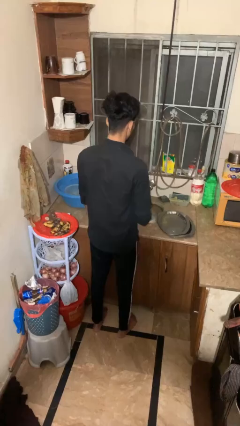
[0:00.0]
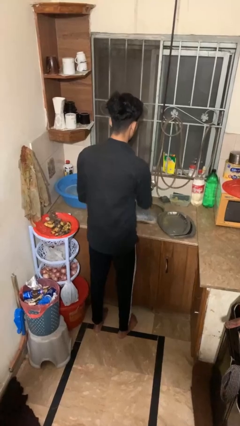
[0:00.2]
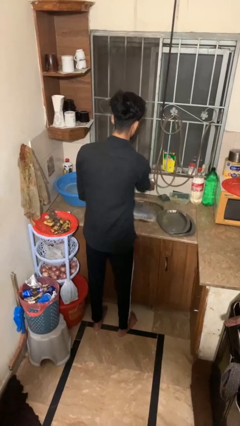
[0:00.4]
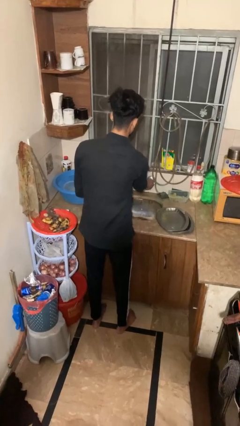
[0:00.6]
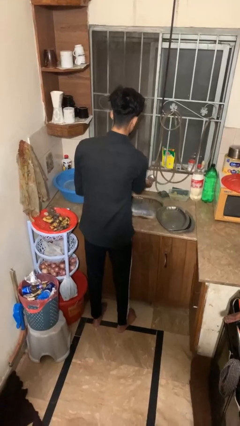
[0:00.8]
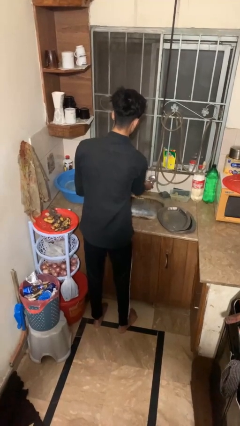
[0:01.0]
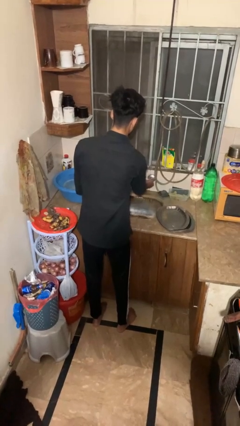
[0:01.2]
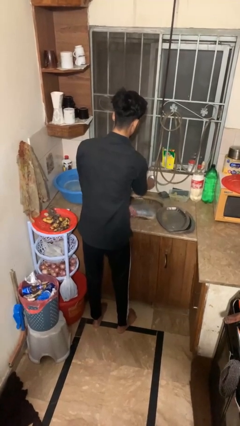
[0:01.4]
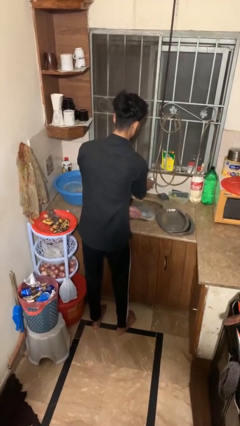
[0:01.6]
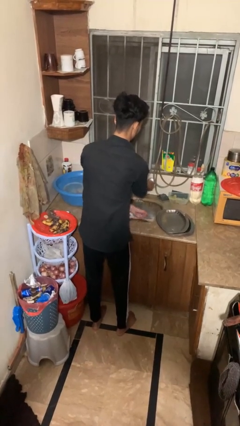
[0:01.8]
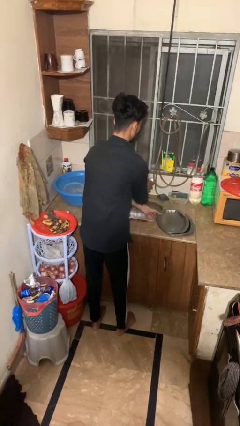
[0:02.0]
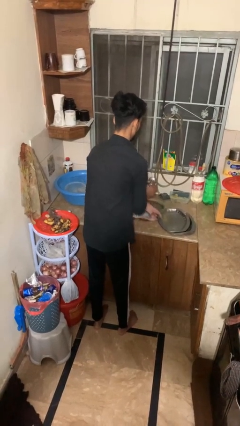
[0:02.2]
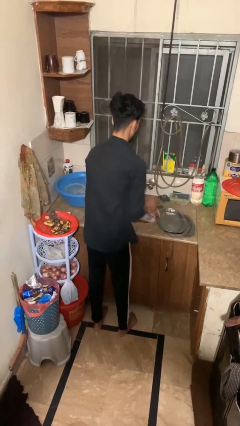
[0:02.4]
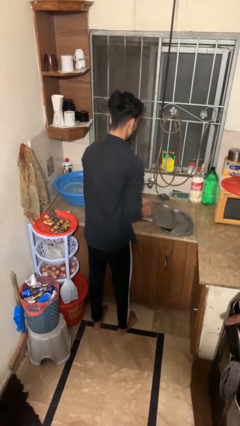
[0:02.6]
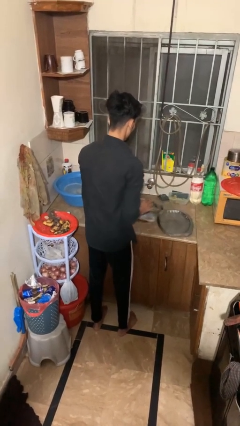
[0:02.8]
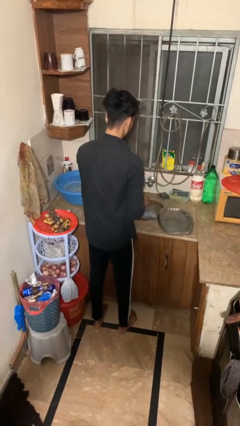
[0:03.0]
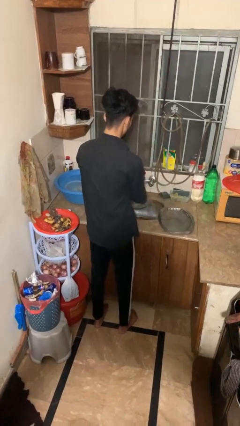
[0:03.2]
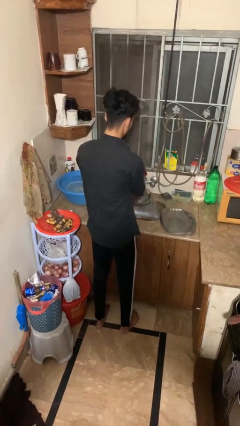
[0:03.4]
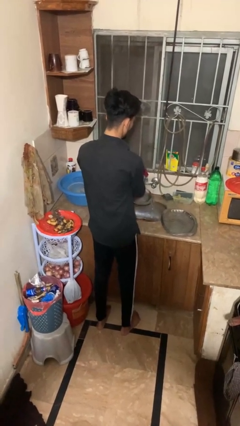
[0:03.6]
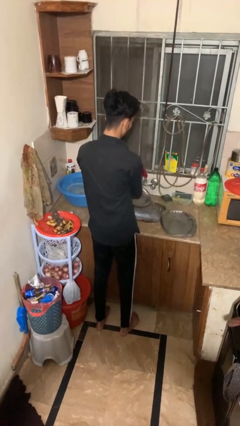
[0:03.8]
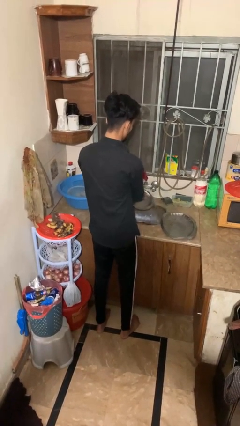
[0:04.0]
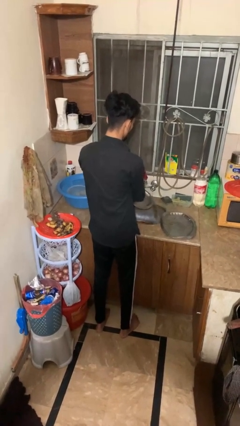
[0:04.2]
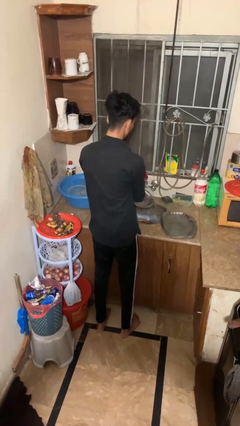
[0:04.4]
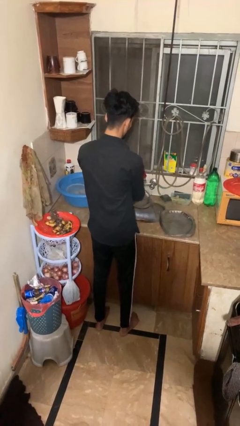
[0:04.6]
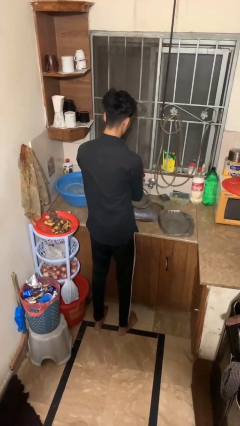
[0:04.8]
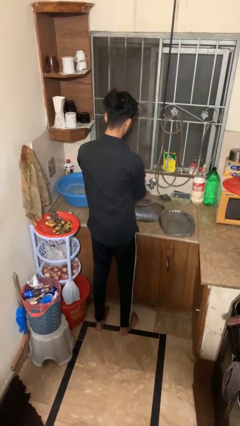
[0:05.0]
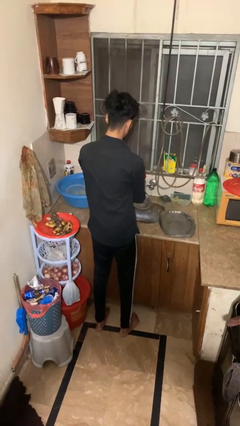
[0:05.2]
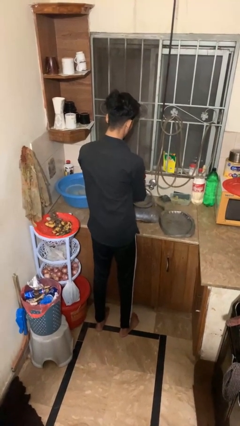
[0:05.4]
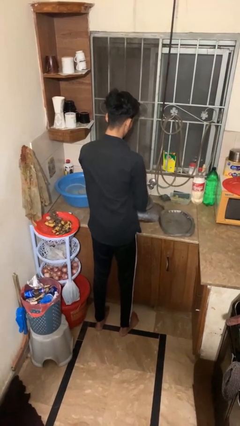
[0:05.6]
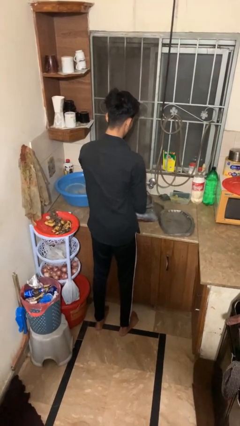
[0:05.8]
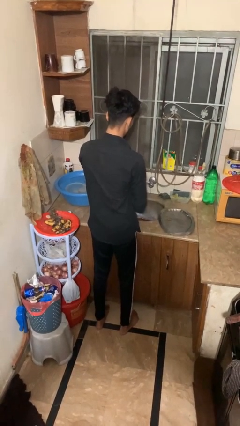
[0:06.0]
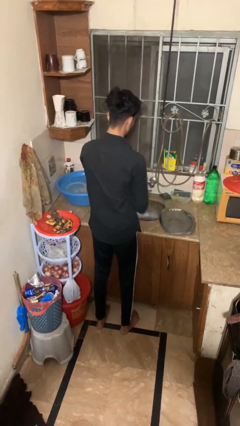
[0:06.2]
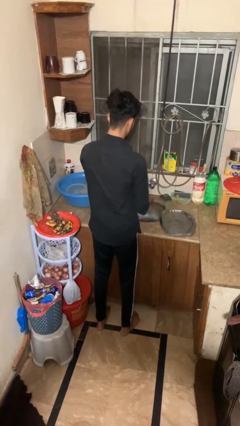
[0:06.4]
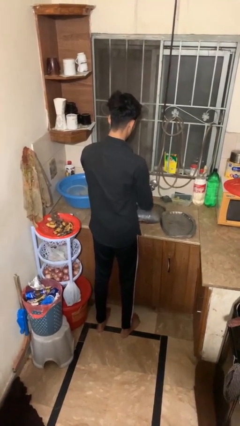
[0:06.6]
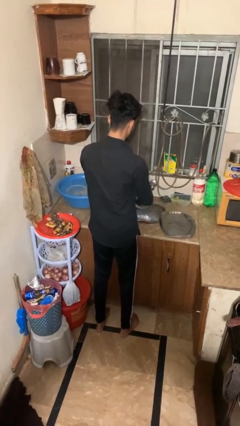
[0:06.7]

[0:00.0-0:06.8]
person opens dishwasher

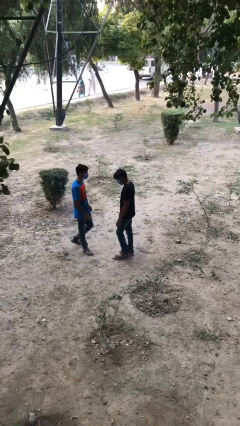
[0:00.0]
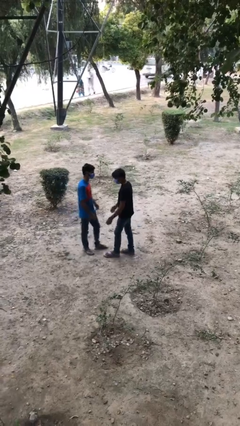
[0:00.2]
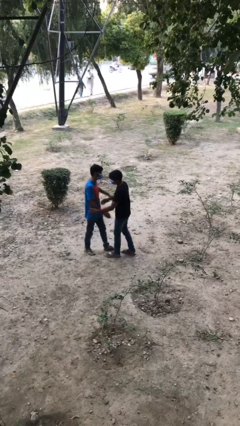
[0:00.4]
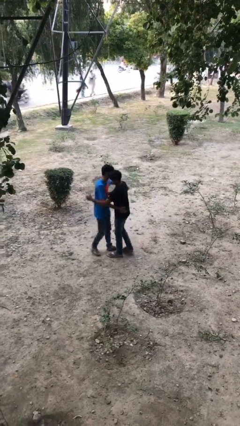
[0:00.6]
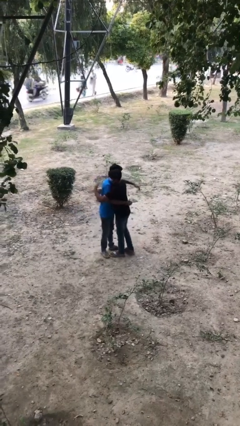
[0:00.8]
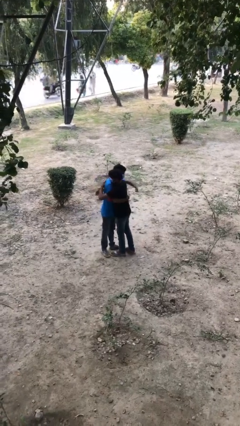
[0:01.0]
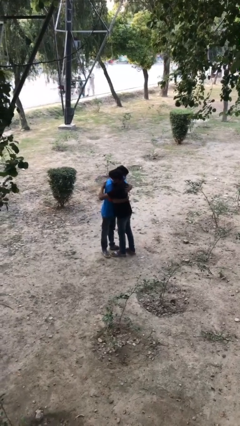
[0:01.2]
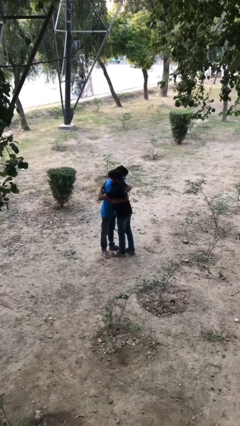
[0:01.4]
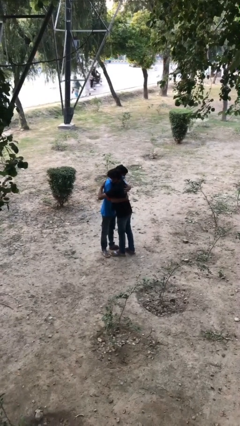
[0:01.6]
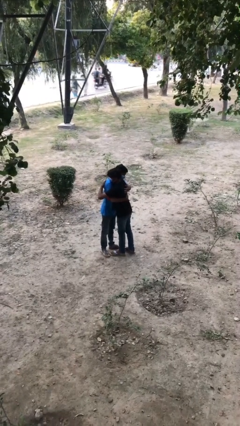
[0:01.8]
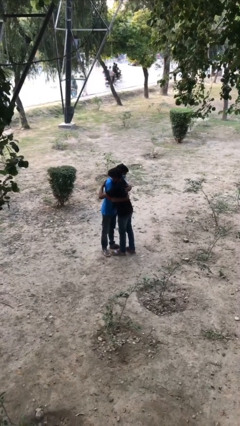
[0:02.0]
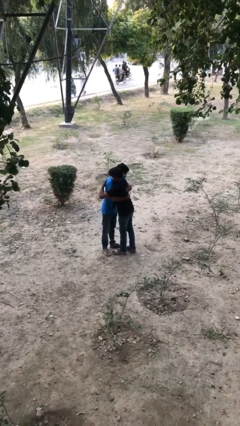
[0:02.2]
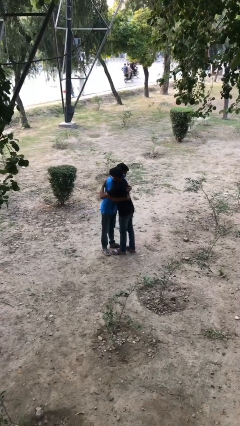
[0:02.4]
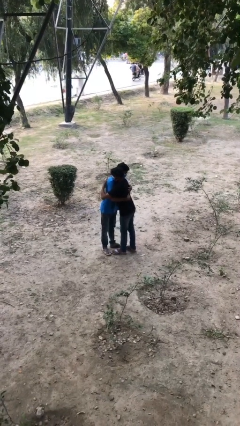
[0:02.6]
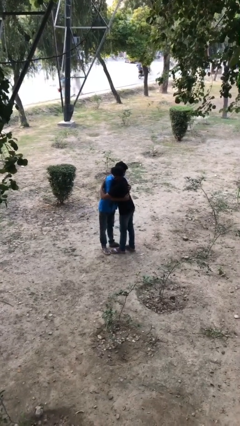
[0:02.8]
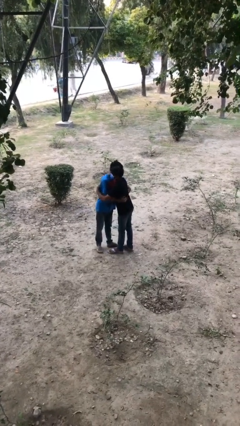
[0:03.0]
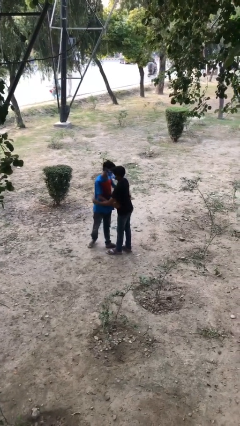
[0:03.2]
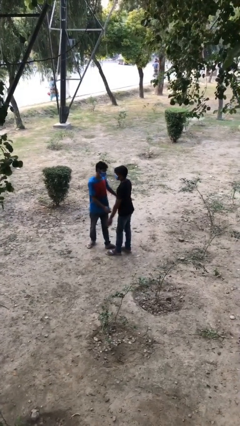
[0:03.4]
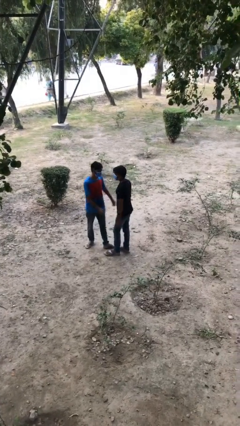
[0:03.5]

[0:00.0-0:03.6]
person embraces person

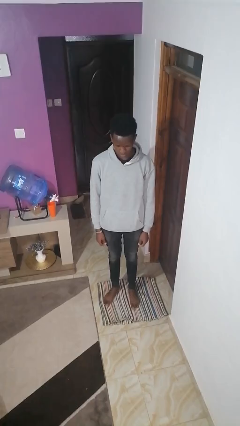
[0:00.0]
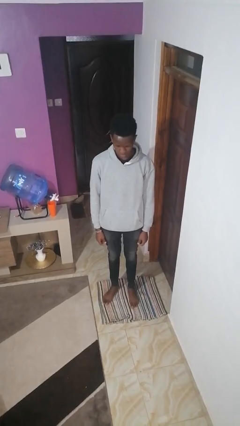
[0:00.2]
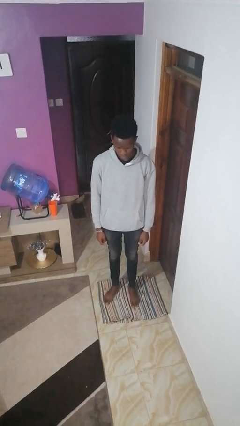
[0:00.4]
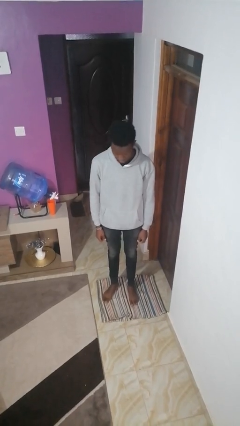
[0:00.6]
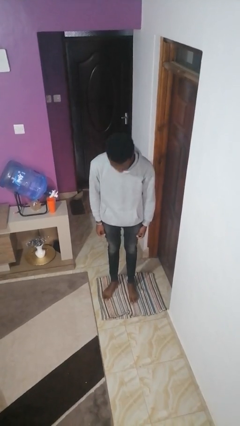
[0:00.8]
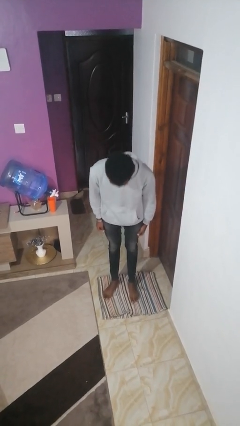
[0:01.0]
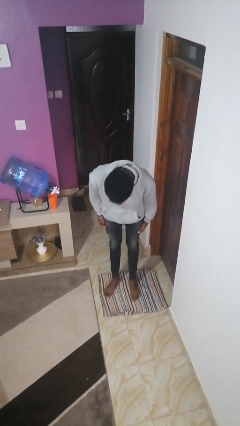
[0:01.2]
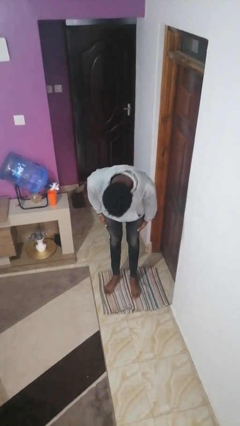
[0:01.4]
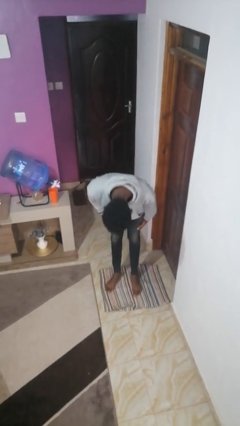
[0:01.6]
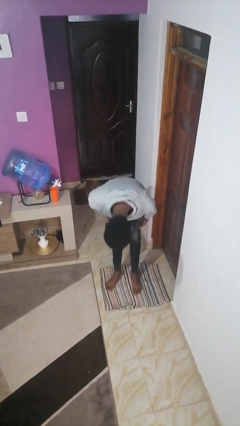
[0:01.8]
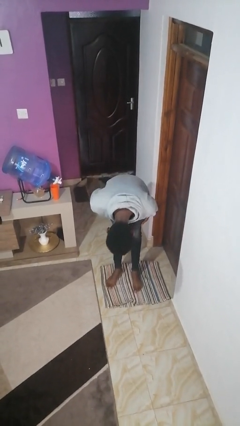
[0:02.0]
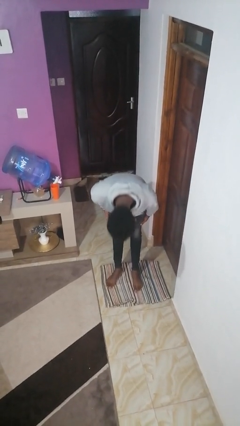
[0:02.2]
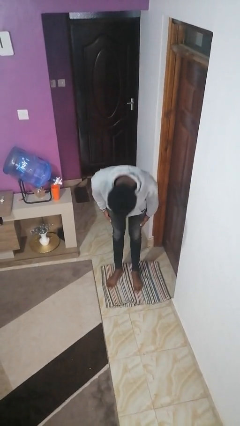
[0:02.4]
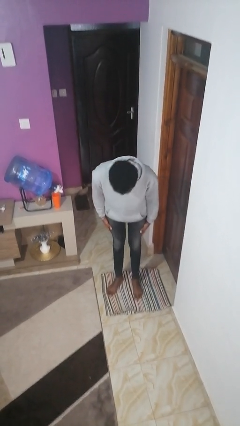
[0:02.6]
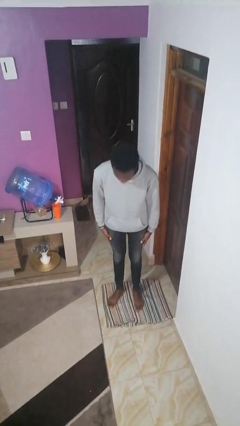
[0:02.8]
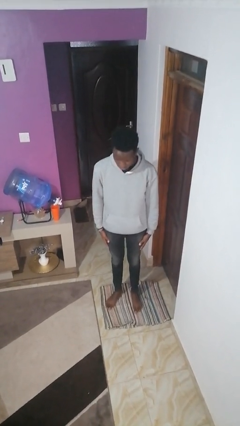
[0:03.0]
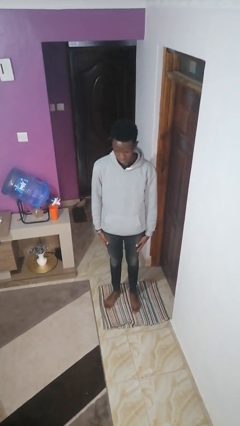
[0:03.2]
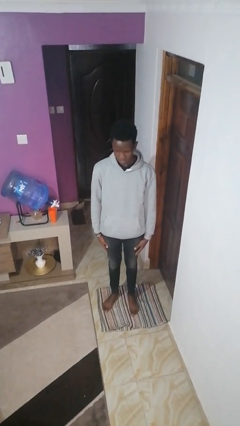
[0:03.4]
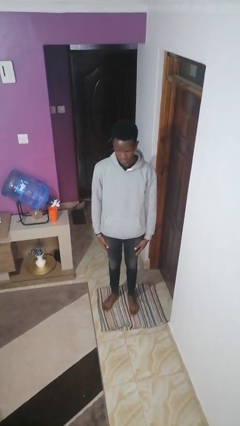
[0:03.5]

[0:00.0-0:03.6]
person bows

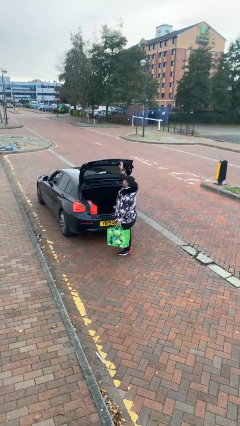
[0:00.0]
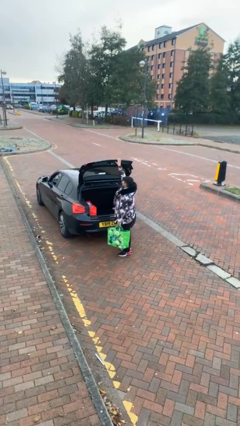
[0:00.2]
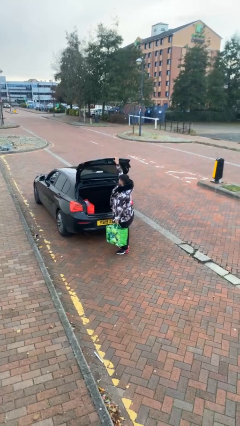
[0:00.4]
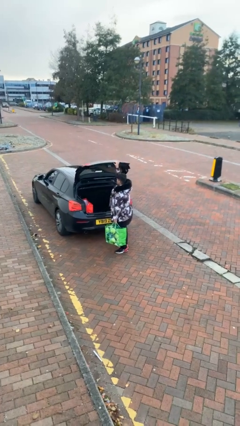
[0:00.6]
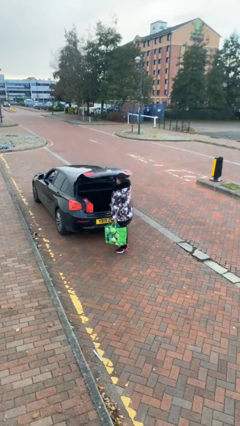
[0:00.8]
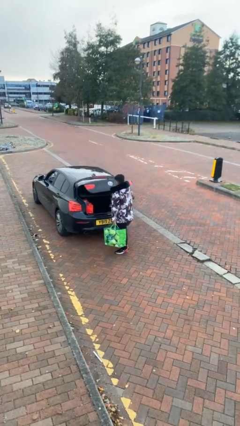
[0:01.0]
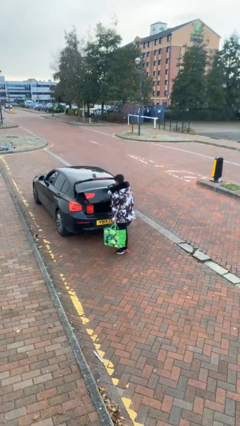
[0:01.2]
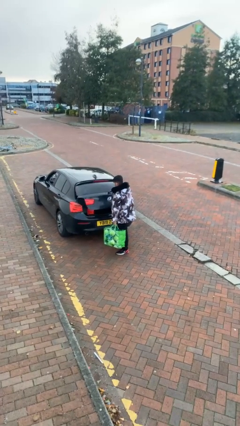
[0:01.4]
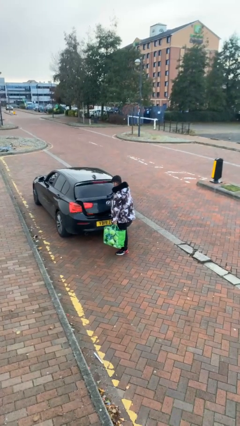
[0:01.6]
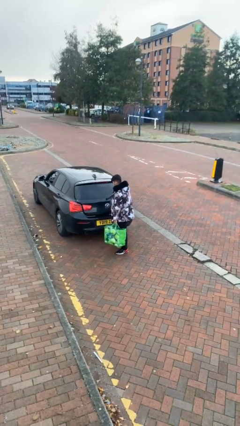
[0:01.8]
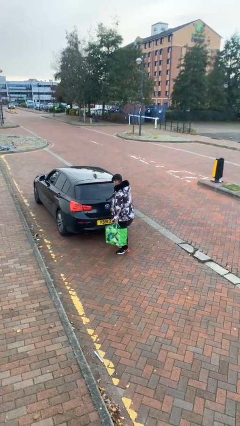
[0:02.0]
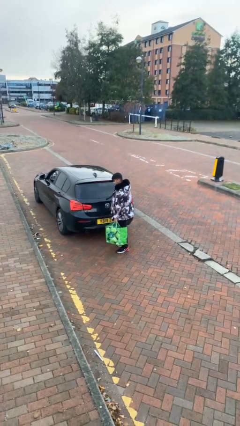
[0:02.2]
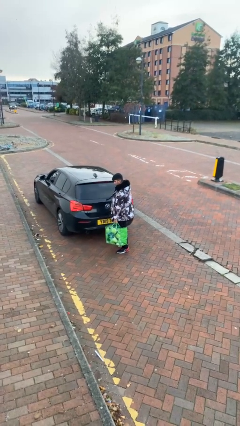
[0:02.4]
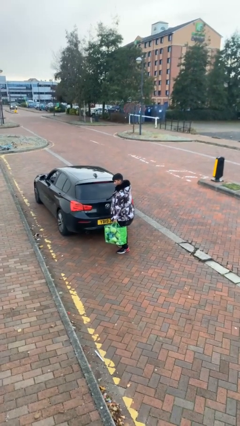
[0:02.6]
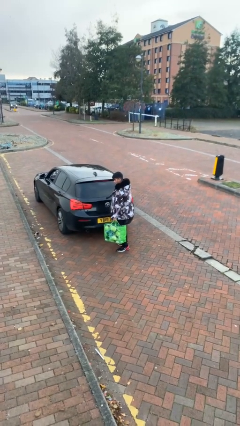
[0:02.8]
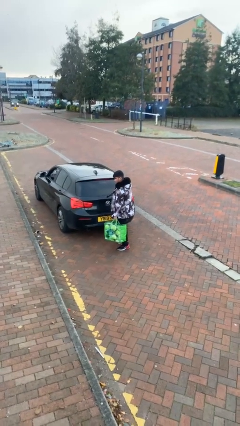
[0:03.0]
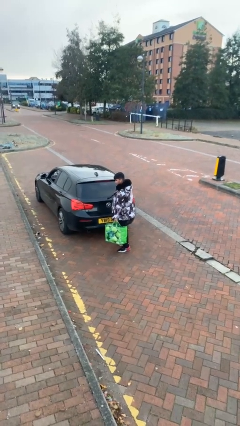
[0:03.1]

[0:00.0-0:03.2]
person closes car trunk

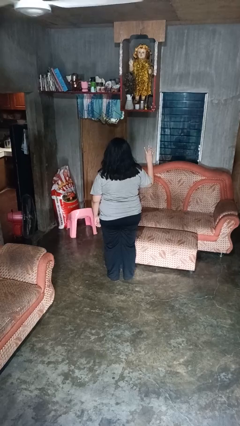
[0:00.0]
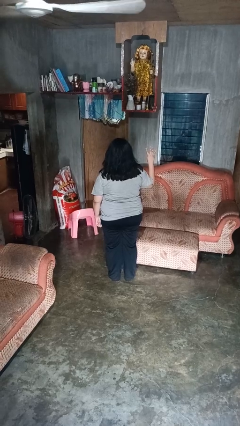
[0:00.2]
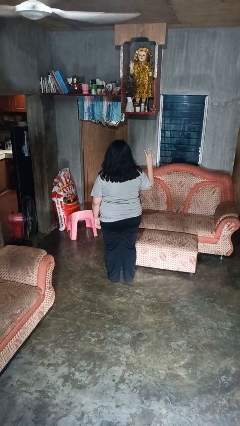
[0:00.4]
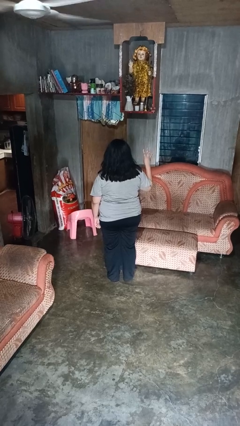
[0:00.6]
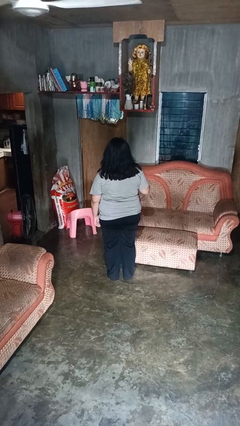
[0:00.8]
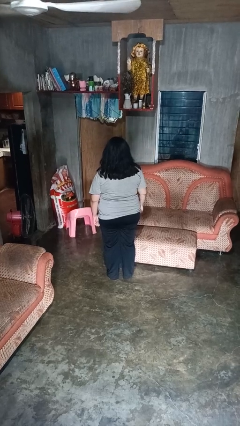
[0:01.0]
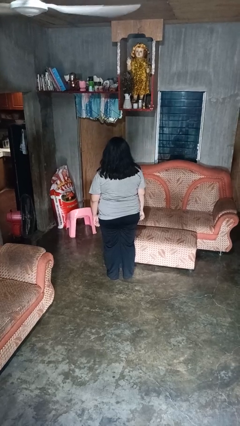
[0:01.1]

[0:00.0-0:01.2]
person gestures number four
